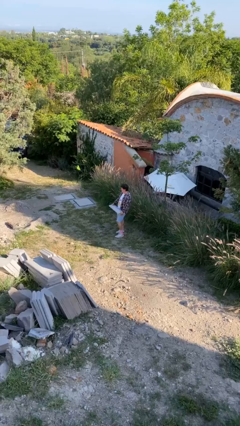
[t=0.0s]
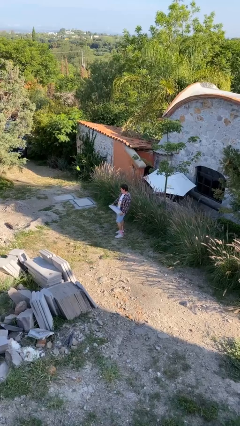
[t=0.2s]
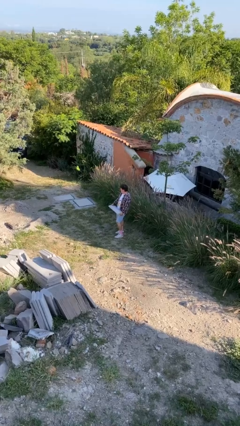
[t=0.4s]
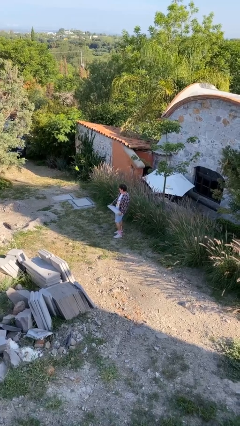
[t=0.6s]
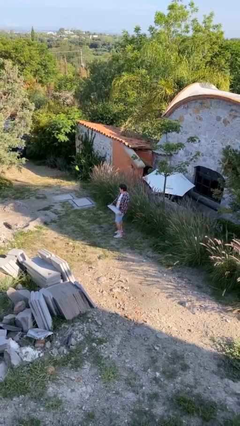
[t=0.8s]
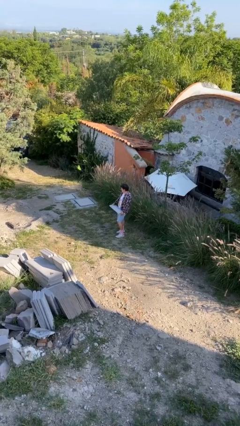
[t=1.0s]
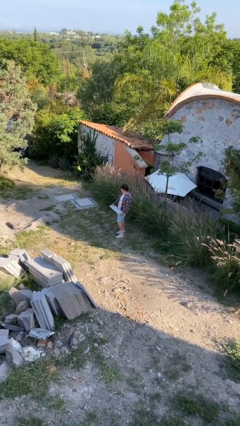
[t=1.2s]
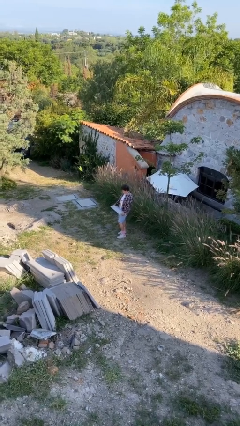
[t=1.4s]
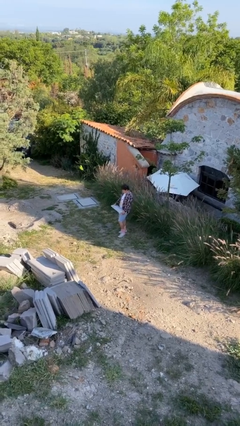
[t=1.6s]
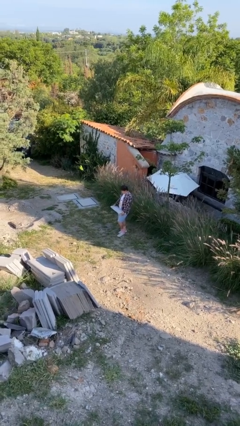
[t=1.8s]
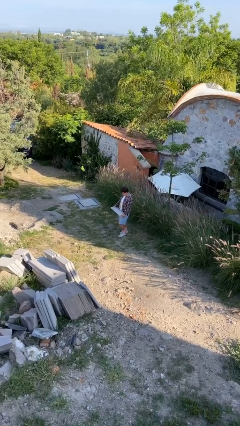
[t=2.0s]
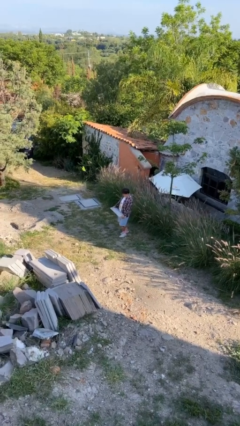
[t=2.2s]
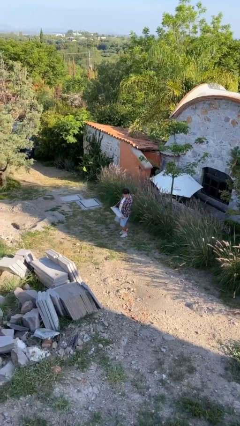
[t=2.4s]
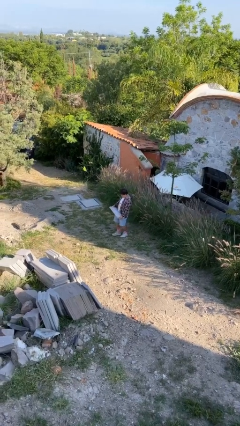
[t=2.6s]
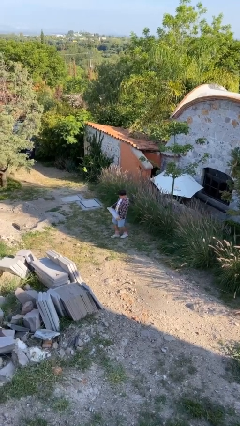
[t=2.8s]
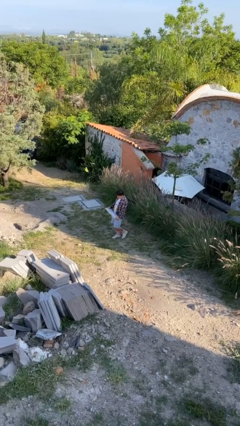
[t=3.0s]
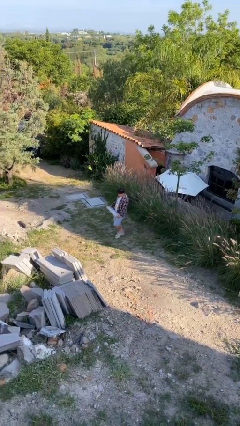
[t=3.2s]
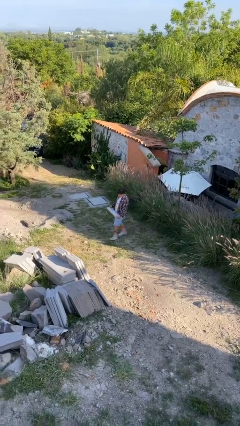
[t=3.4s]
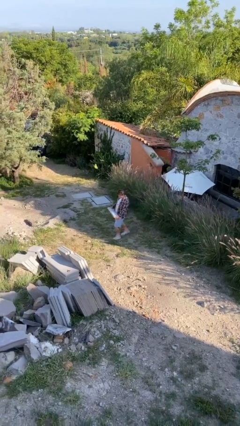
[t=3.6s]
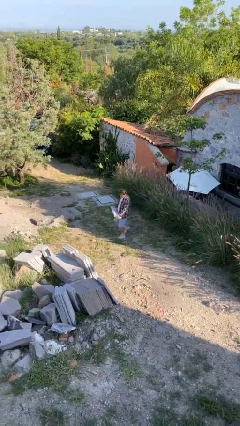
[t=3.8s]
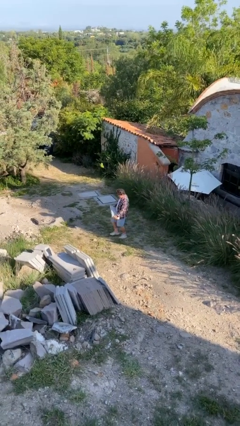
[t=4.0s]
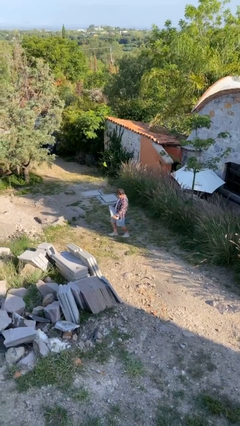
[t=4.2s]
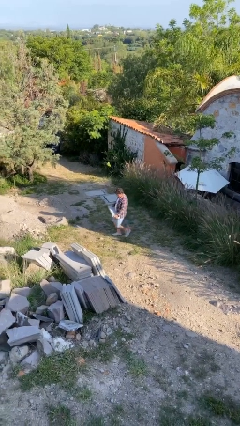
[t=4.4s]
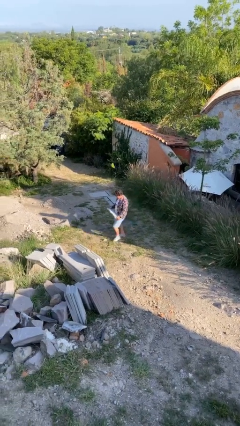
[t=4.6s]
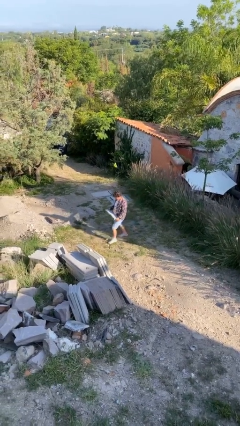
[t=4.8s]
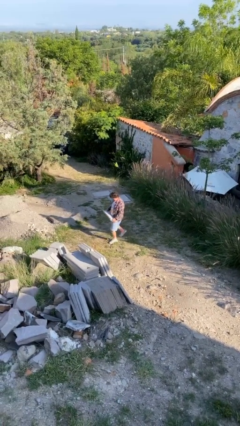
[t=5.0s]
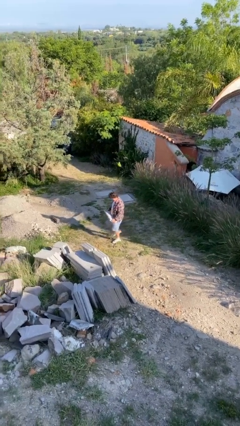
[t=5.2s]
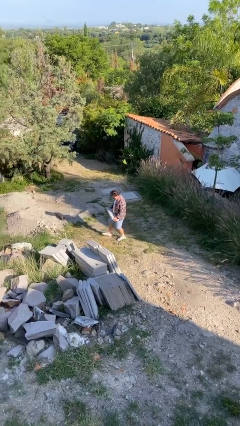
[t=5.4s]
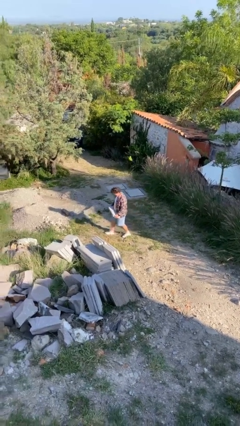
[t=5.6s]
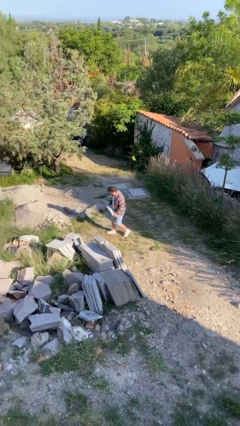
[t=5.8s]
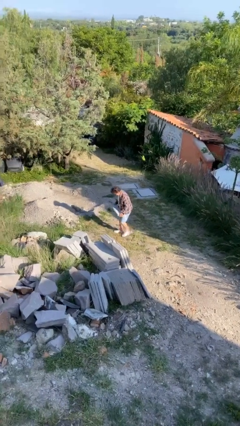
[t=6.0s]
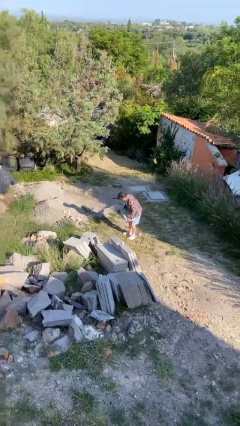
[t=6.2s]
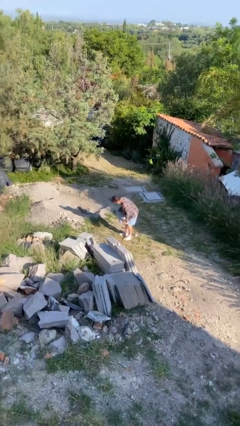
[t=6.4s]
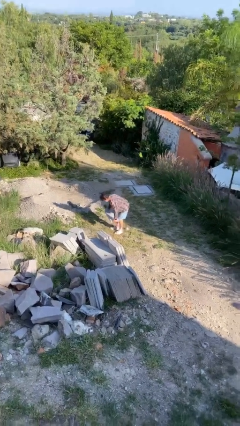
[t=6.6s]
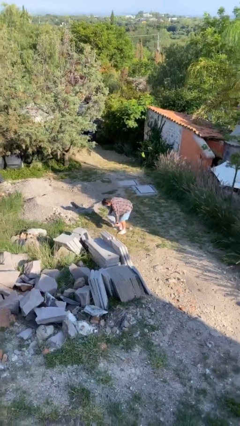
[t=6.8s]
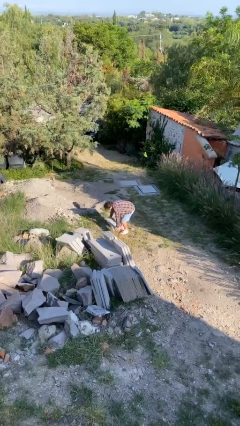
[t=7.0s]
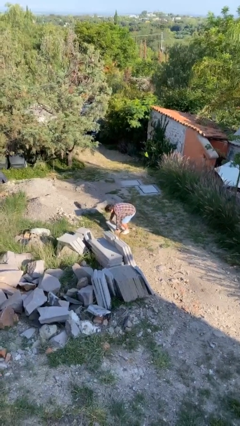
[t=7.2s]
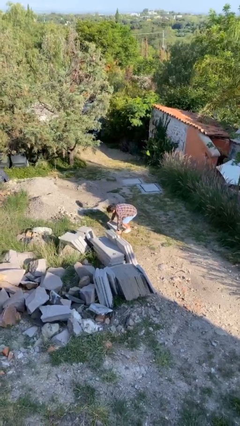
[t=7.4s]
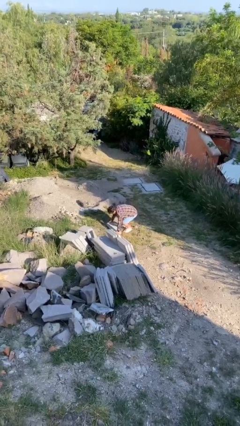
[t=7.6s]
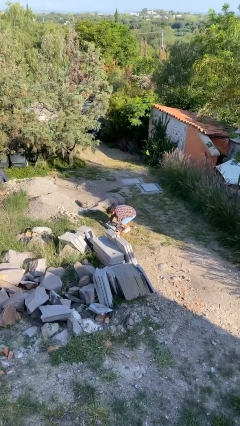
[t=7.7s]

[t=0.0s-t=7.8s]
person carries heavy object

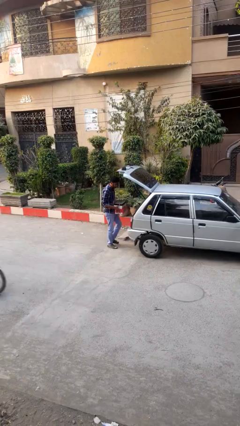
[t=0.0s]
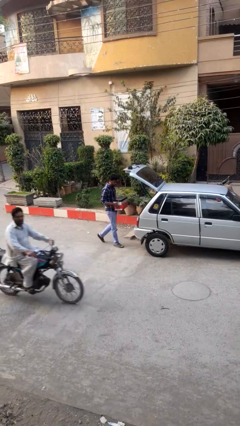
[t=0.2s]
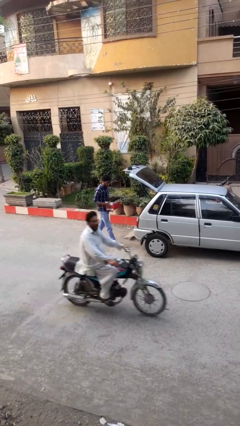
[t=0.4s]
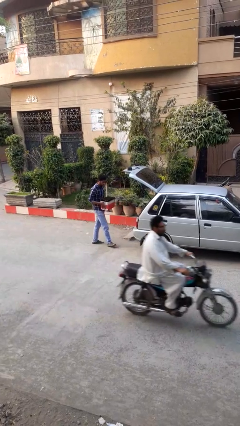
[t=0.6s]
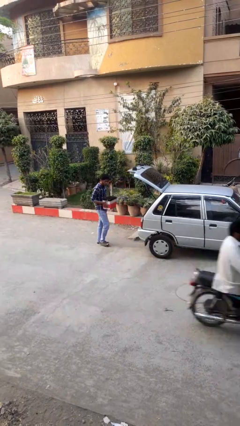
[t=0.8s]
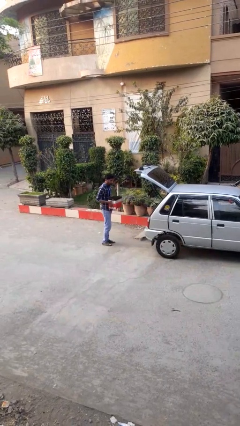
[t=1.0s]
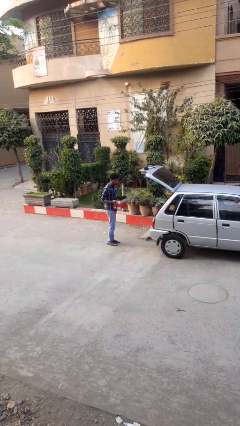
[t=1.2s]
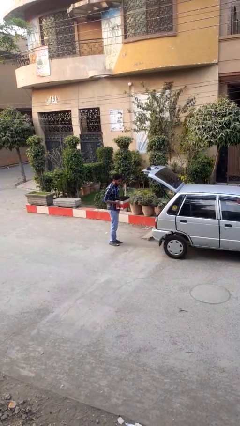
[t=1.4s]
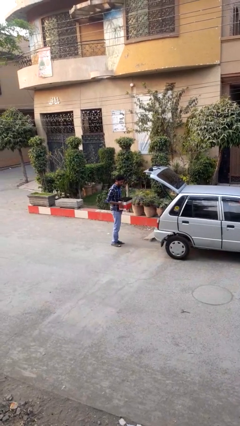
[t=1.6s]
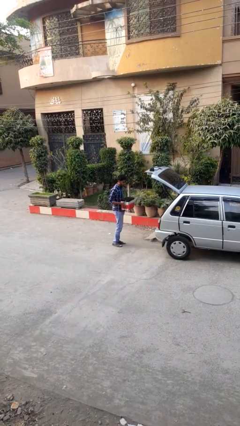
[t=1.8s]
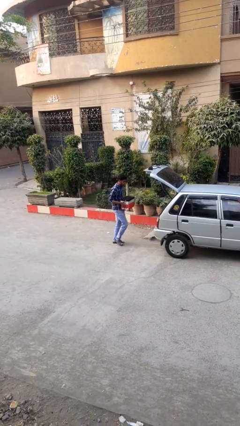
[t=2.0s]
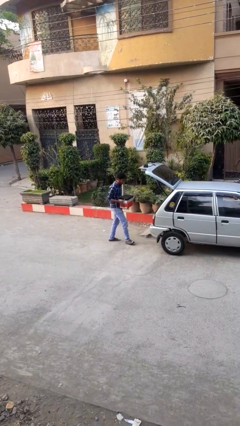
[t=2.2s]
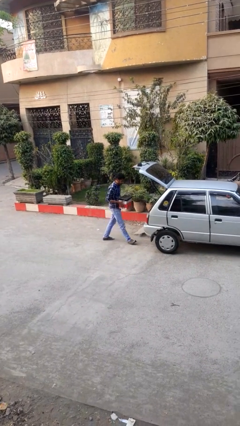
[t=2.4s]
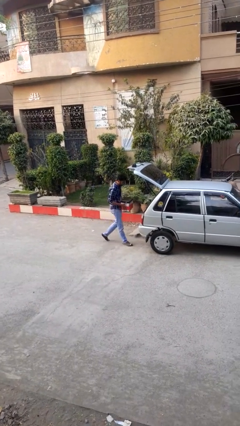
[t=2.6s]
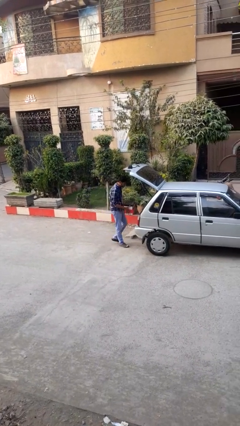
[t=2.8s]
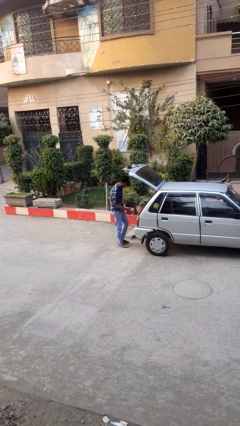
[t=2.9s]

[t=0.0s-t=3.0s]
person unloads car

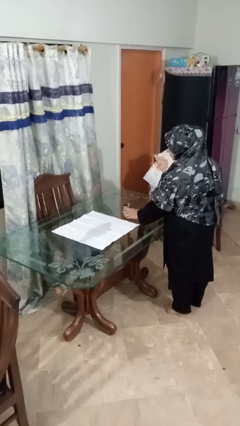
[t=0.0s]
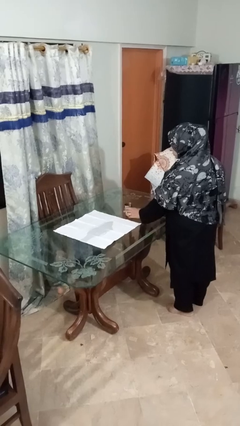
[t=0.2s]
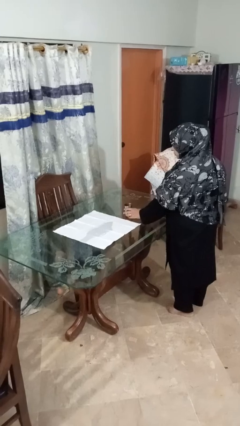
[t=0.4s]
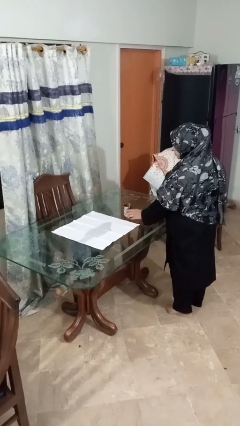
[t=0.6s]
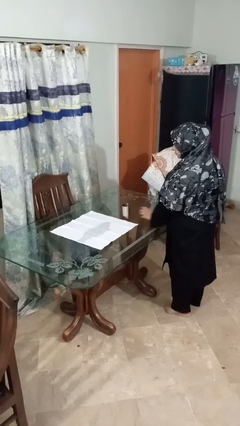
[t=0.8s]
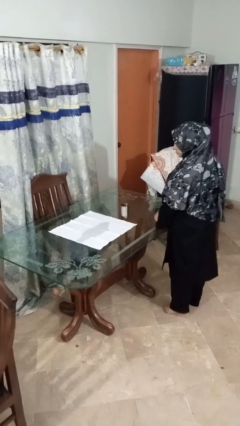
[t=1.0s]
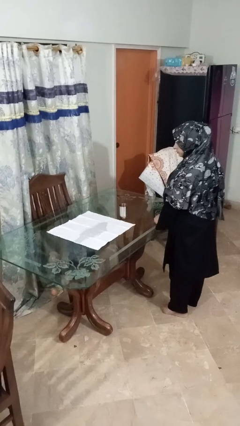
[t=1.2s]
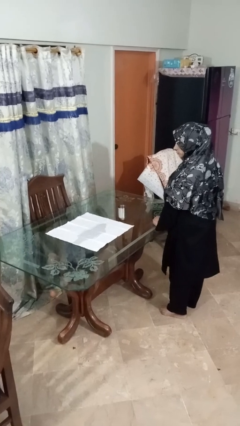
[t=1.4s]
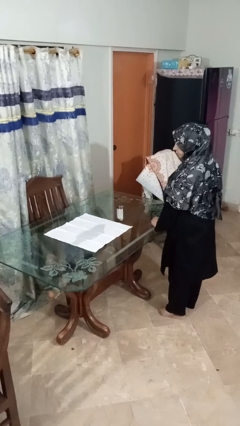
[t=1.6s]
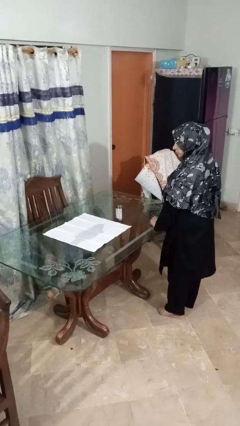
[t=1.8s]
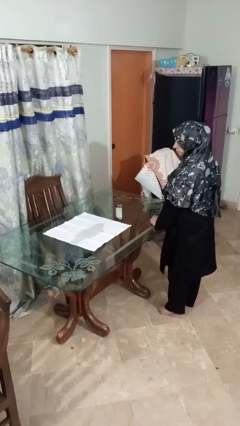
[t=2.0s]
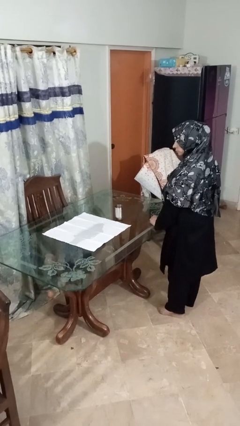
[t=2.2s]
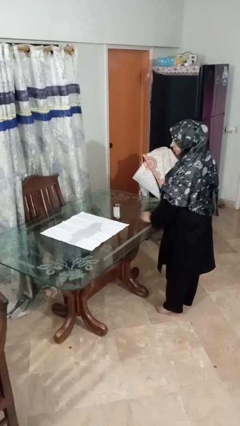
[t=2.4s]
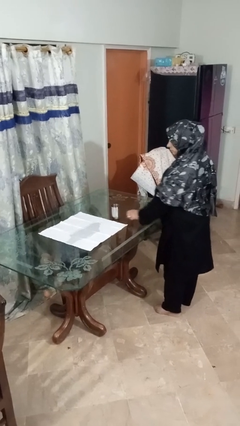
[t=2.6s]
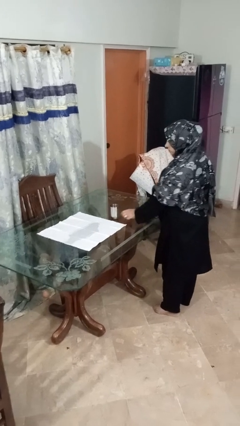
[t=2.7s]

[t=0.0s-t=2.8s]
person sets upright glass

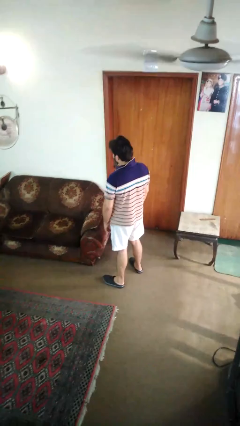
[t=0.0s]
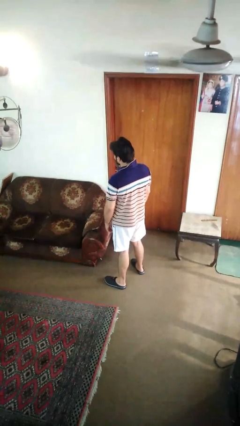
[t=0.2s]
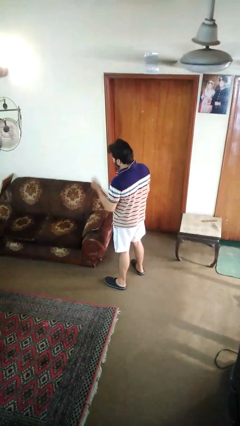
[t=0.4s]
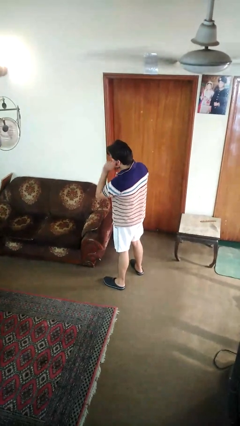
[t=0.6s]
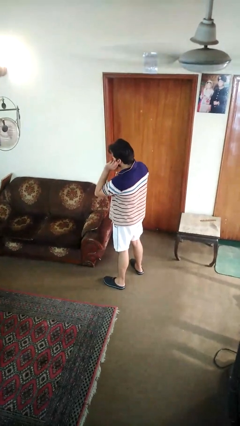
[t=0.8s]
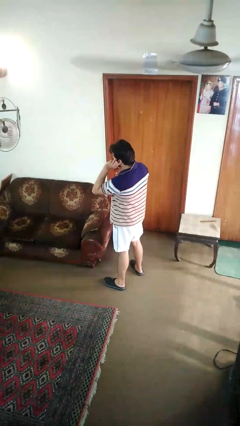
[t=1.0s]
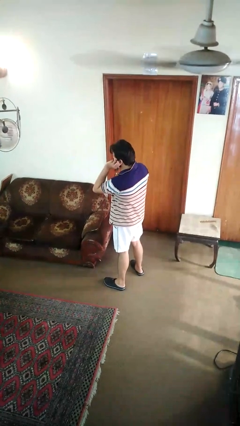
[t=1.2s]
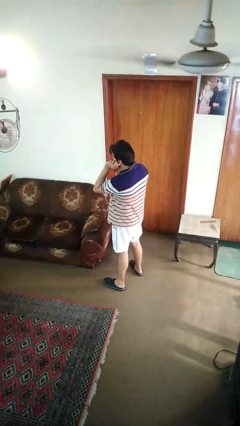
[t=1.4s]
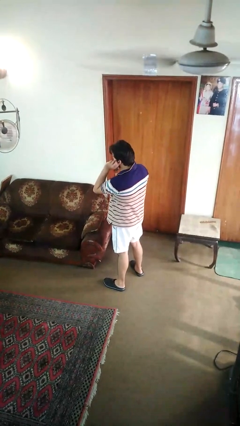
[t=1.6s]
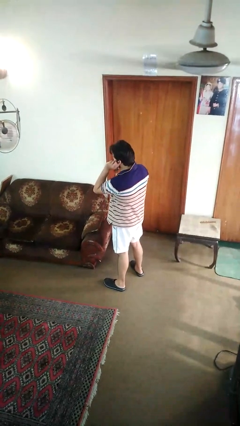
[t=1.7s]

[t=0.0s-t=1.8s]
person touches earlobe

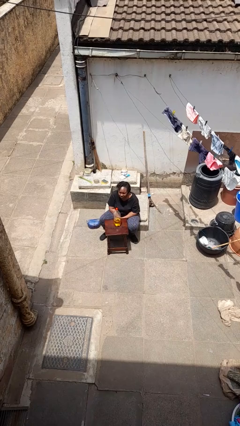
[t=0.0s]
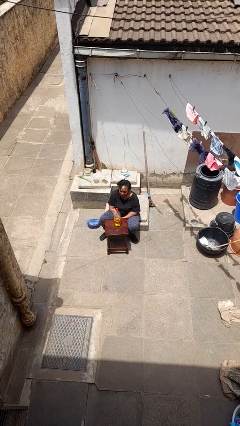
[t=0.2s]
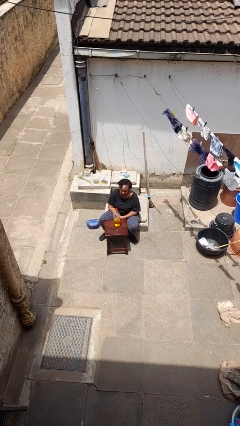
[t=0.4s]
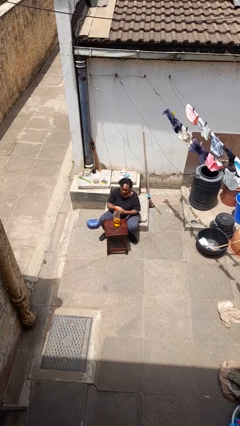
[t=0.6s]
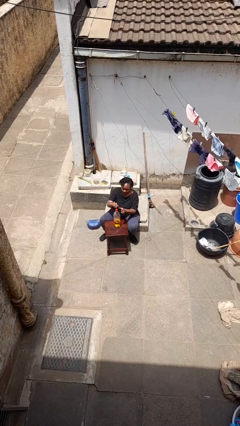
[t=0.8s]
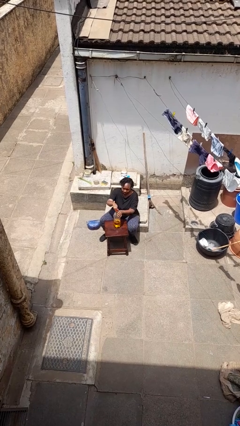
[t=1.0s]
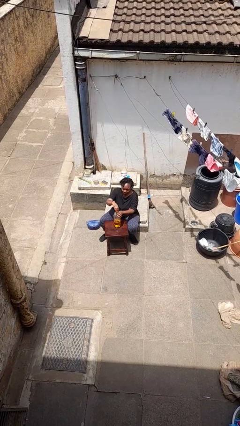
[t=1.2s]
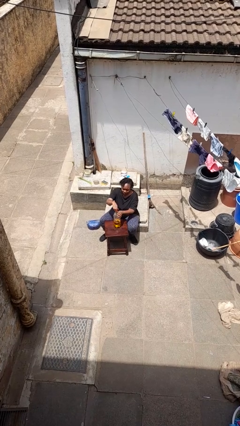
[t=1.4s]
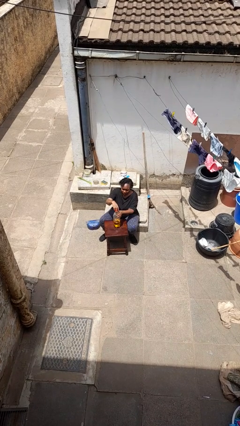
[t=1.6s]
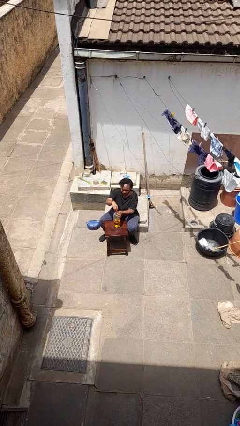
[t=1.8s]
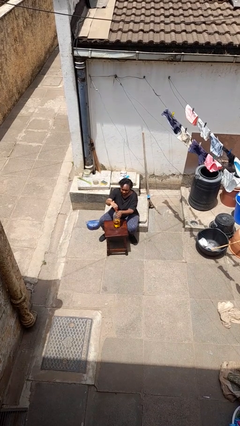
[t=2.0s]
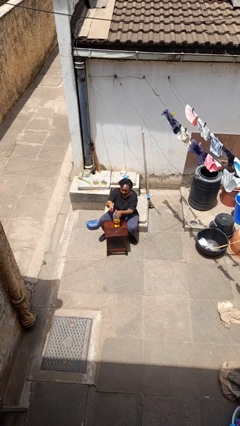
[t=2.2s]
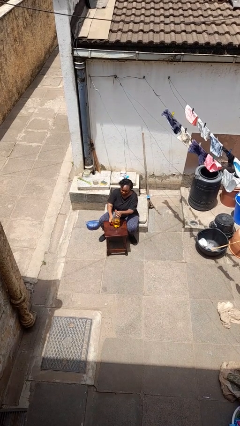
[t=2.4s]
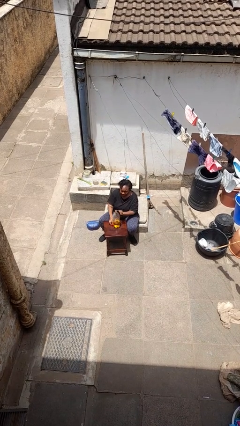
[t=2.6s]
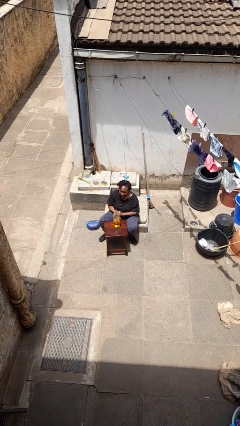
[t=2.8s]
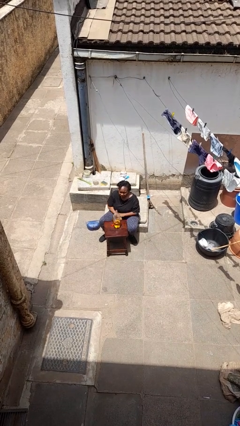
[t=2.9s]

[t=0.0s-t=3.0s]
person unscrews lid from bottle
